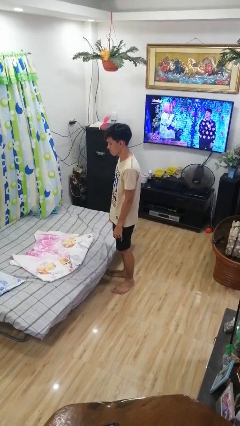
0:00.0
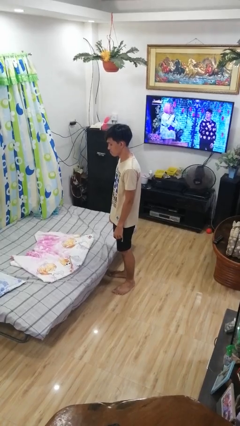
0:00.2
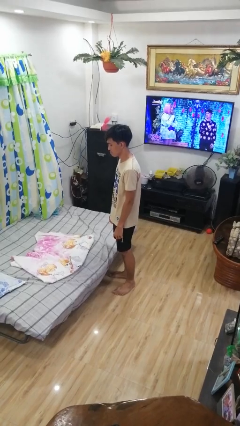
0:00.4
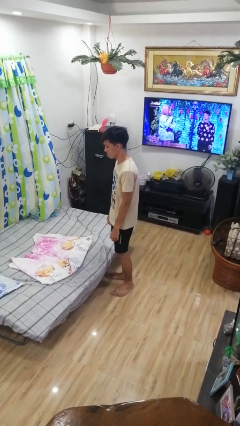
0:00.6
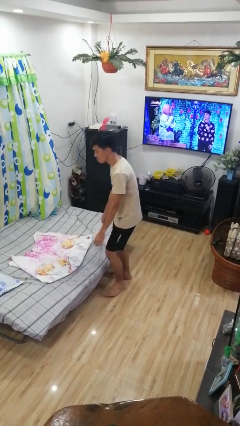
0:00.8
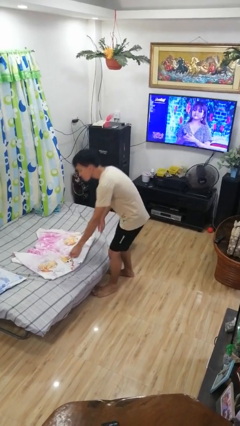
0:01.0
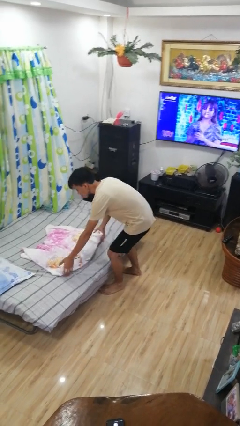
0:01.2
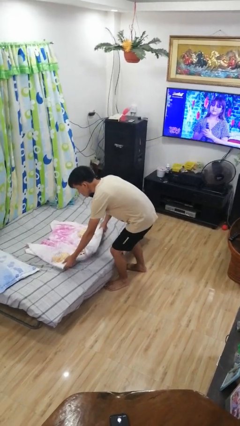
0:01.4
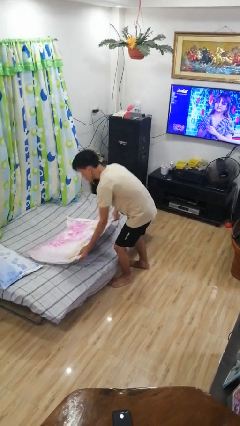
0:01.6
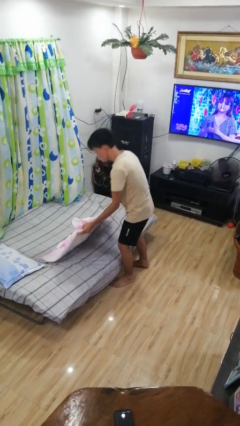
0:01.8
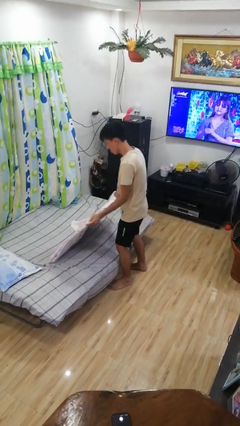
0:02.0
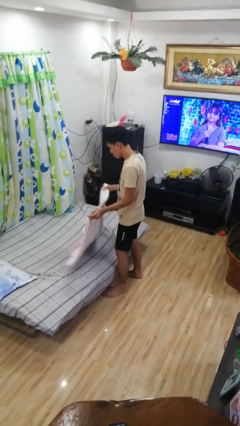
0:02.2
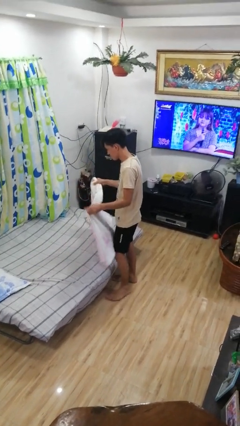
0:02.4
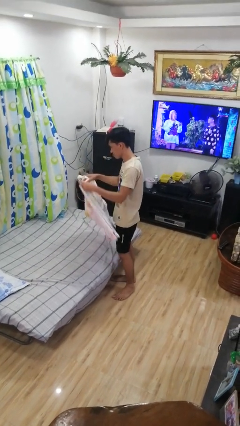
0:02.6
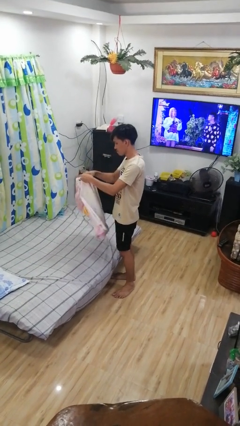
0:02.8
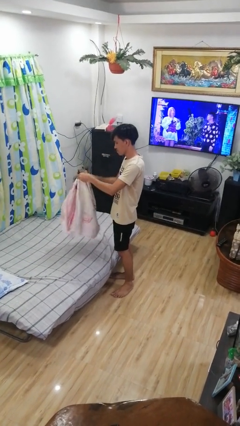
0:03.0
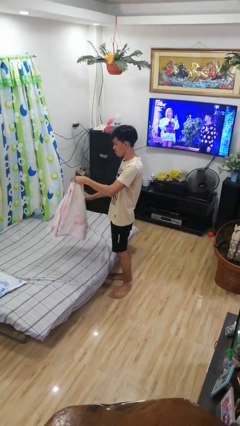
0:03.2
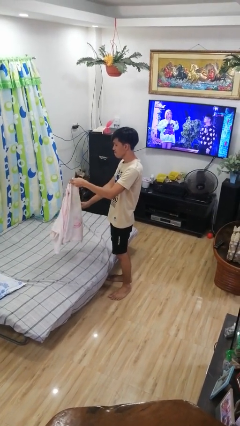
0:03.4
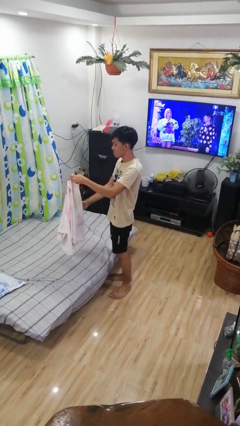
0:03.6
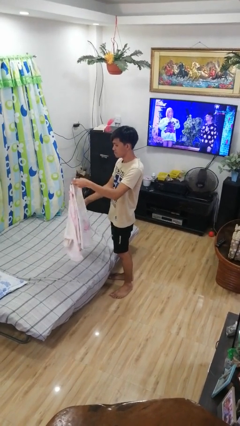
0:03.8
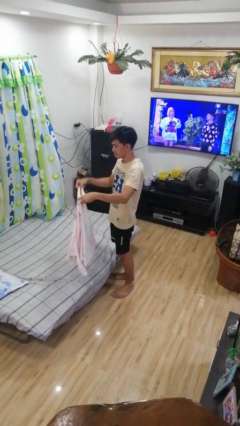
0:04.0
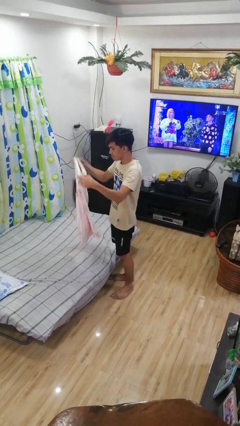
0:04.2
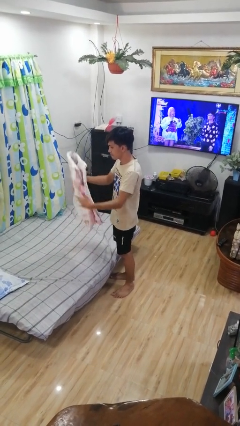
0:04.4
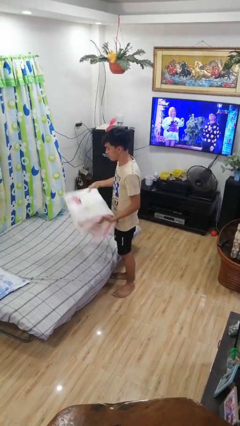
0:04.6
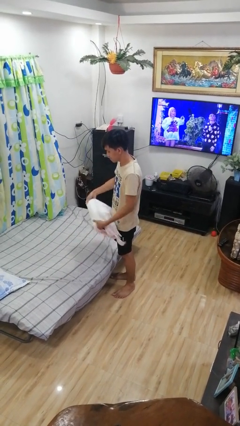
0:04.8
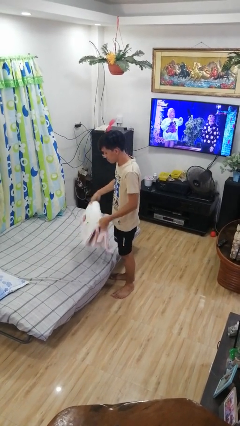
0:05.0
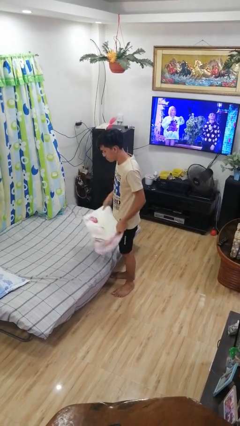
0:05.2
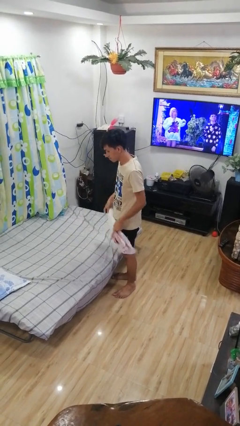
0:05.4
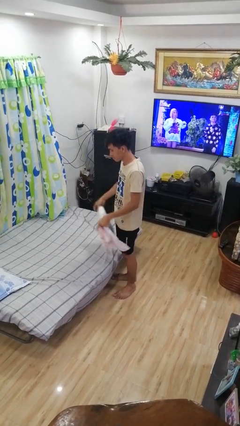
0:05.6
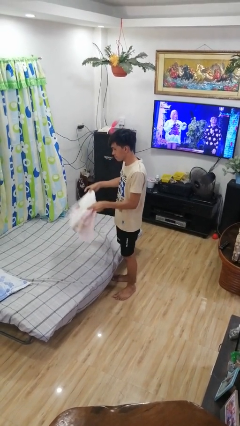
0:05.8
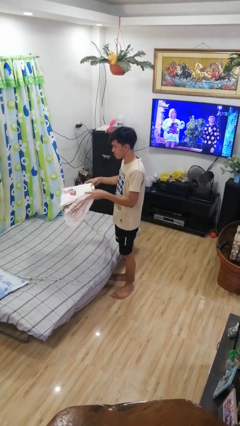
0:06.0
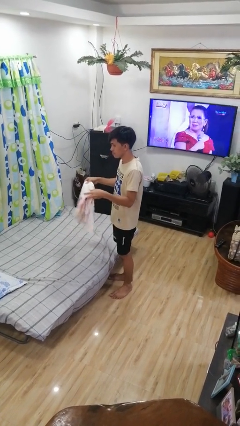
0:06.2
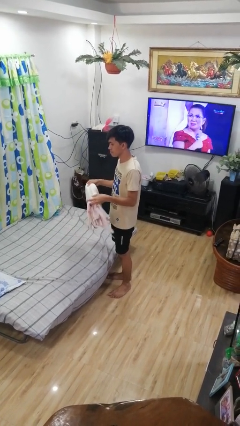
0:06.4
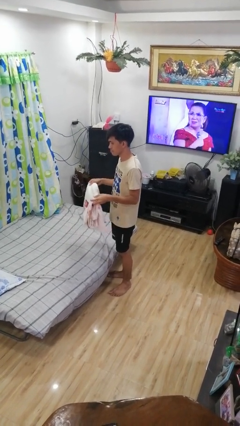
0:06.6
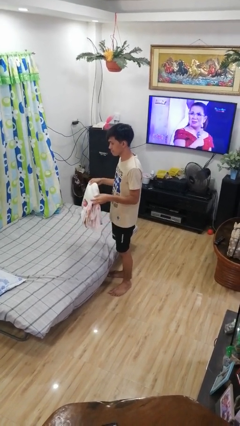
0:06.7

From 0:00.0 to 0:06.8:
person folds blanket

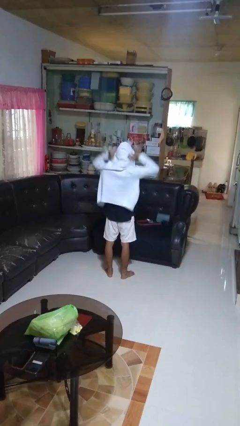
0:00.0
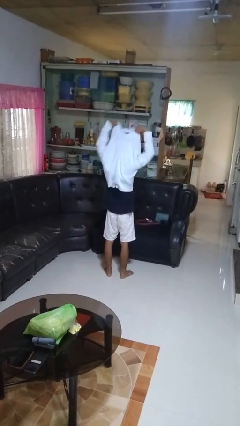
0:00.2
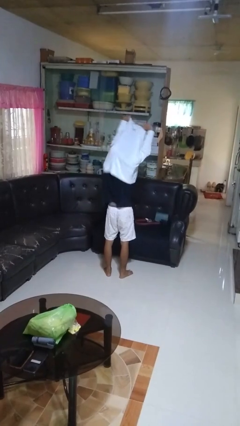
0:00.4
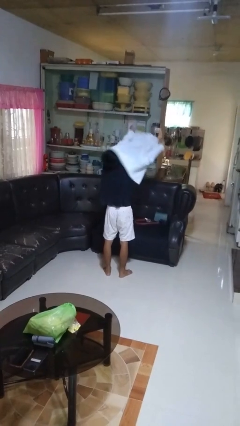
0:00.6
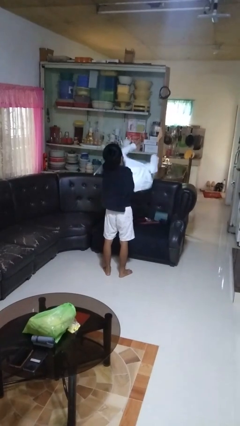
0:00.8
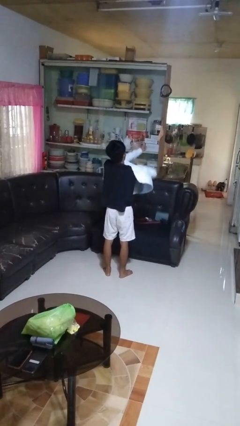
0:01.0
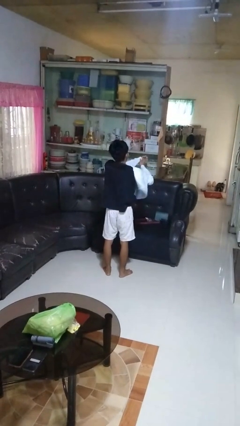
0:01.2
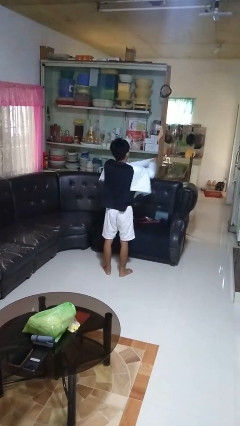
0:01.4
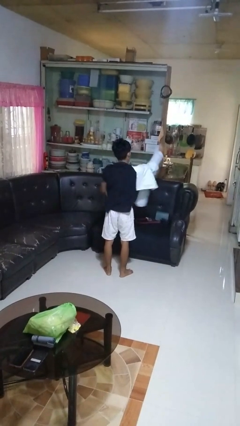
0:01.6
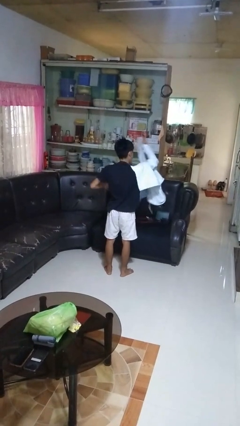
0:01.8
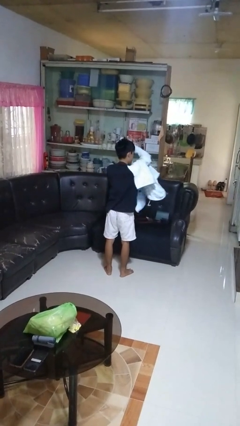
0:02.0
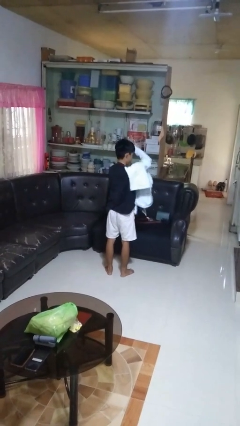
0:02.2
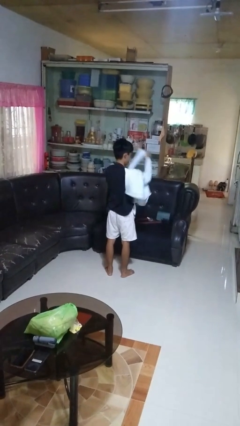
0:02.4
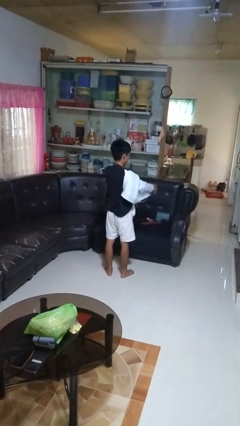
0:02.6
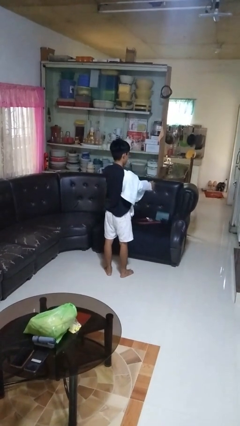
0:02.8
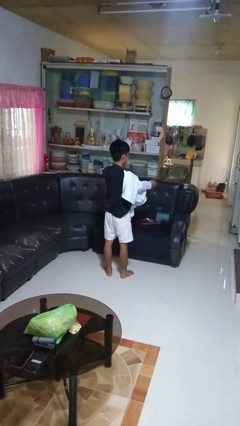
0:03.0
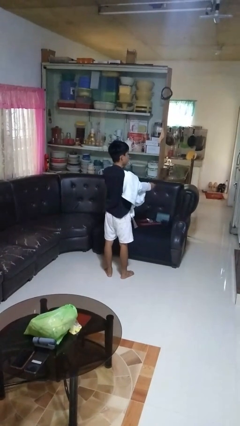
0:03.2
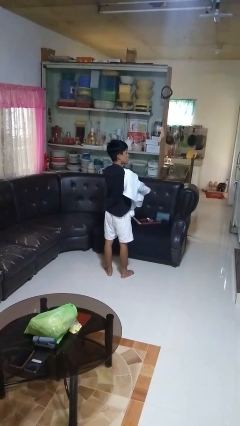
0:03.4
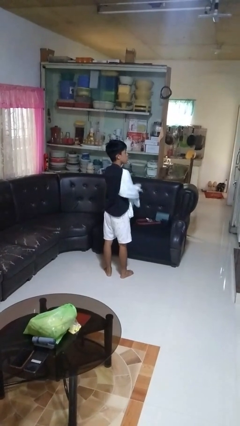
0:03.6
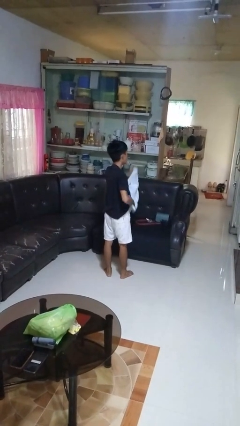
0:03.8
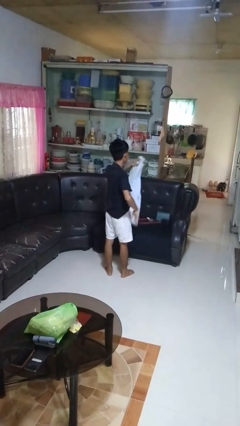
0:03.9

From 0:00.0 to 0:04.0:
person takes off hoodie

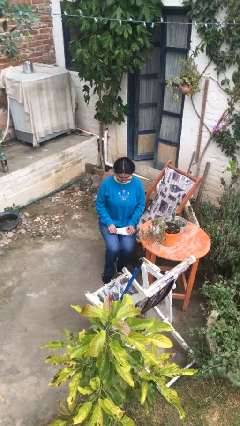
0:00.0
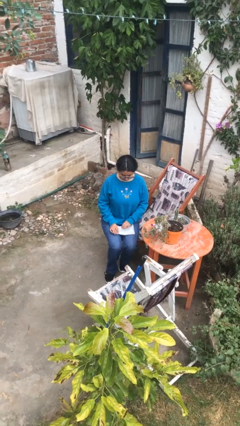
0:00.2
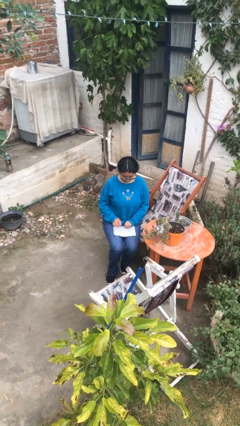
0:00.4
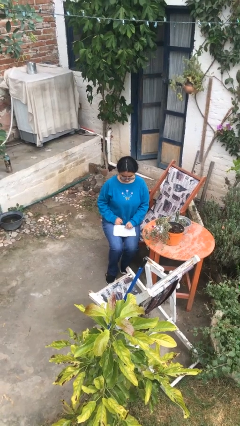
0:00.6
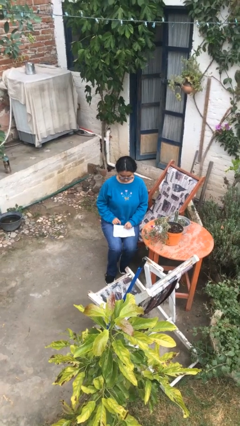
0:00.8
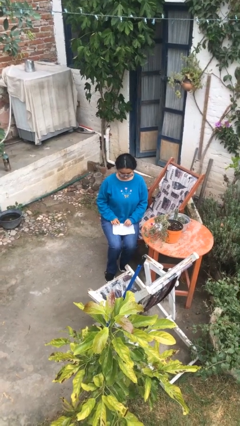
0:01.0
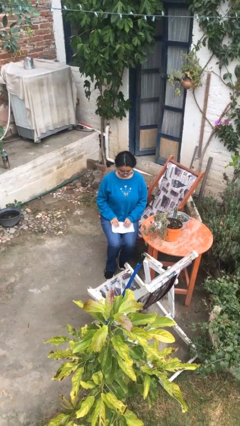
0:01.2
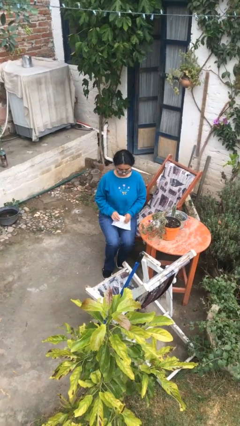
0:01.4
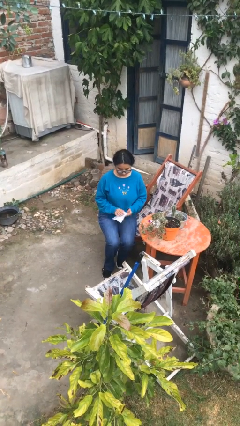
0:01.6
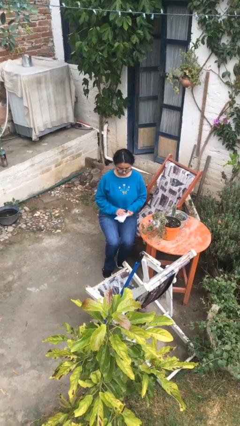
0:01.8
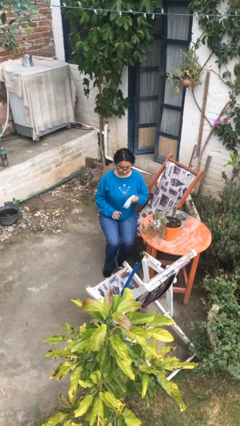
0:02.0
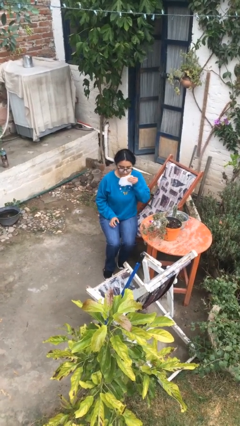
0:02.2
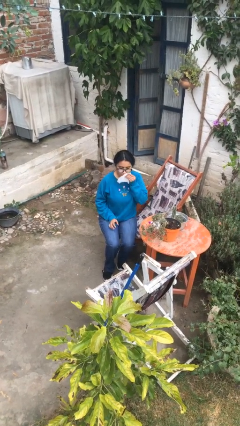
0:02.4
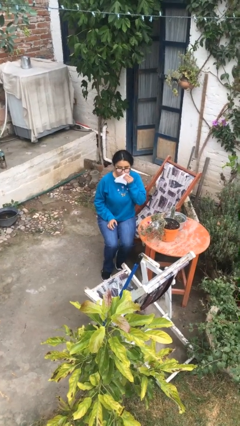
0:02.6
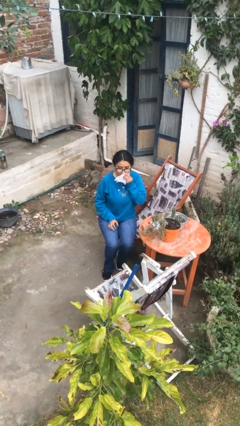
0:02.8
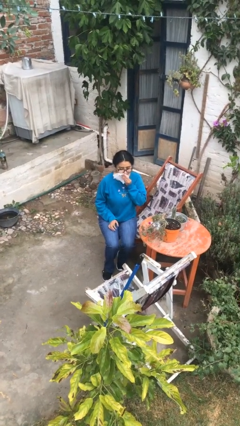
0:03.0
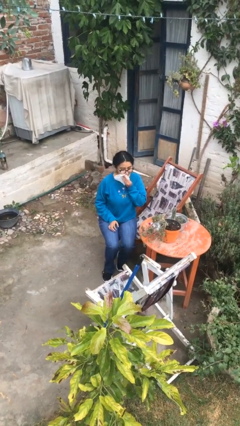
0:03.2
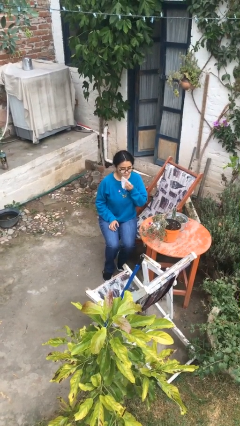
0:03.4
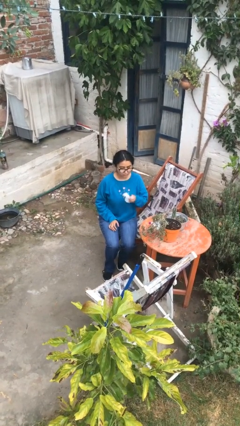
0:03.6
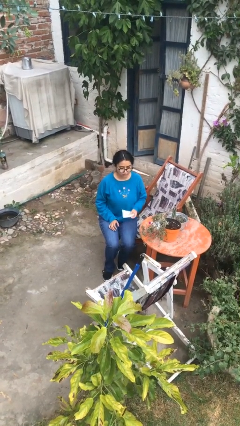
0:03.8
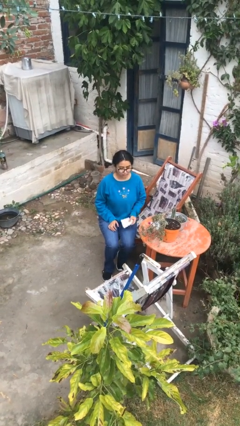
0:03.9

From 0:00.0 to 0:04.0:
person wipes mouth with napkin

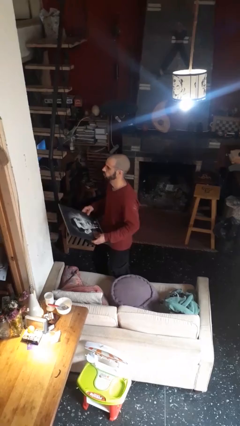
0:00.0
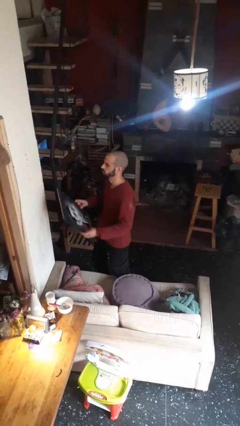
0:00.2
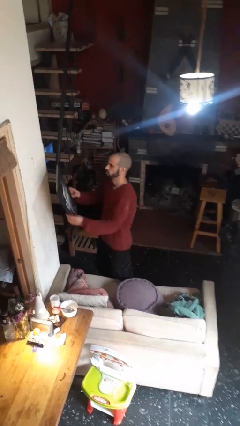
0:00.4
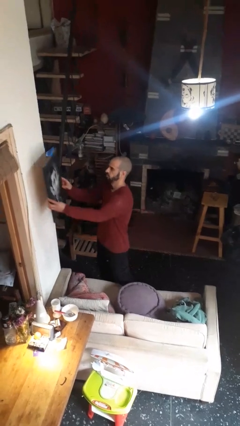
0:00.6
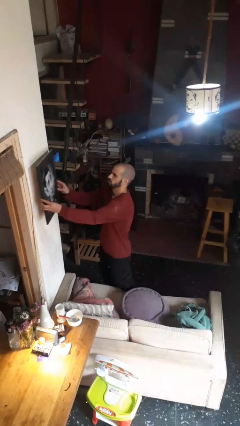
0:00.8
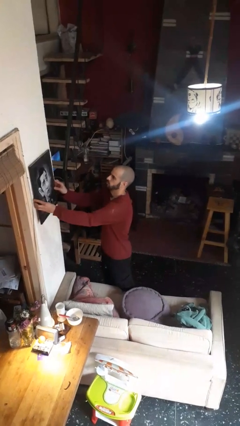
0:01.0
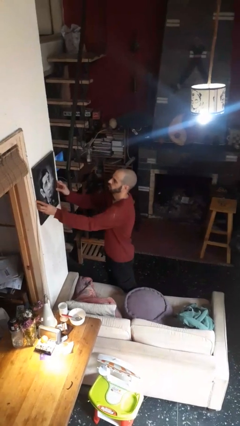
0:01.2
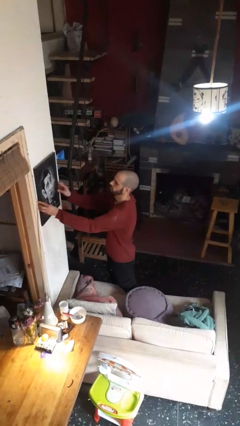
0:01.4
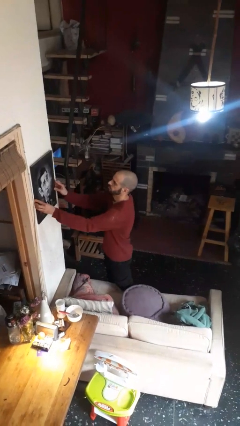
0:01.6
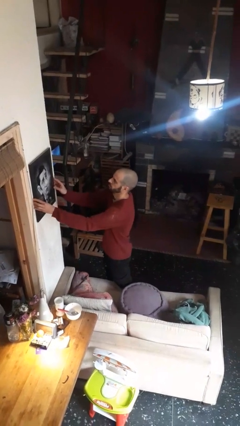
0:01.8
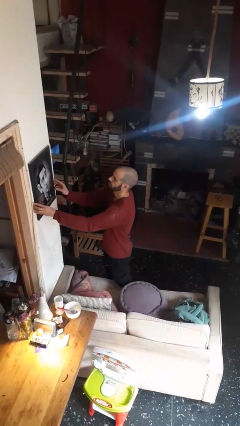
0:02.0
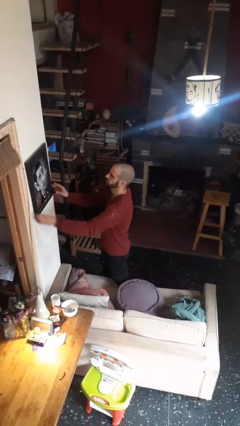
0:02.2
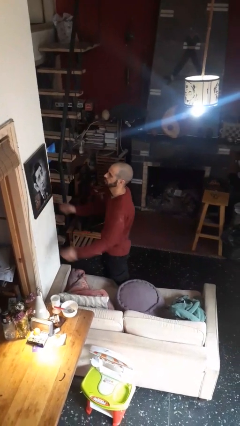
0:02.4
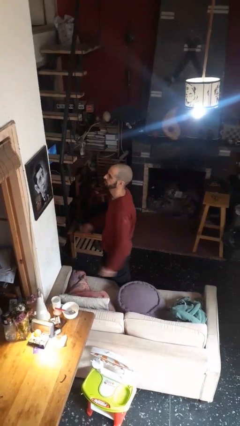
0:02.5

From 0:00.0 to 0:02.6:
person puts up picture frame

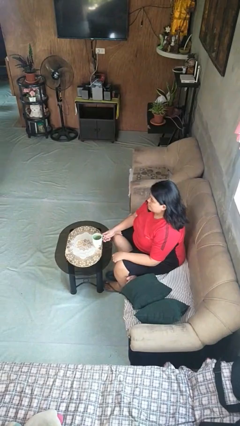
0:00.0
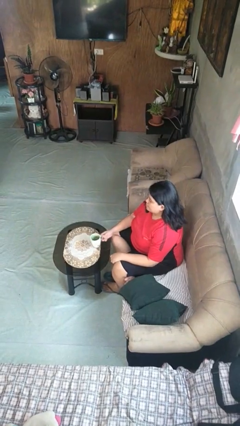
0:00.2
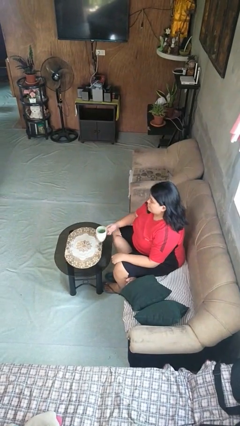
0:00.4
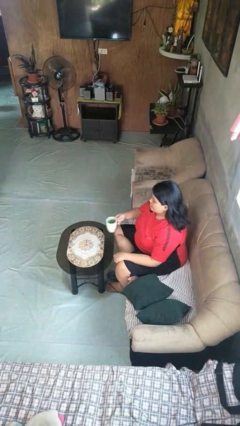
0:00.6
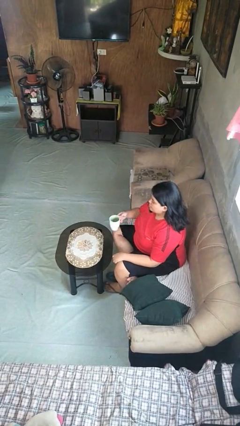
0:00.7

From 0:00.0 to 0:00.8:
person picks up object from table
